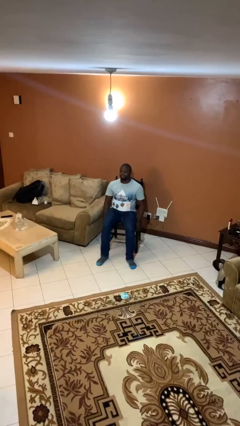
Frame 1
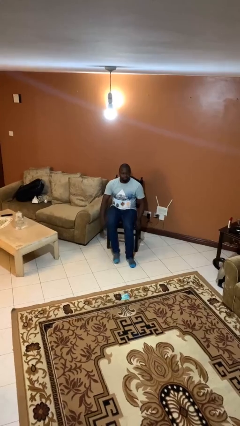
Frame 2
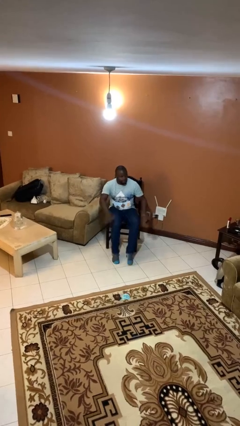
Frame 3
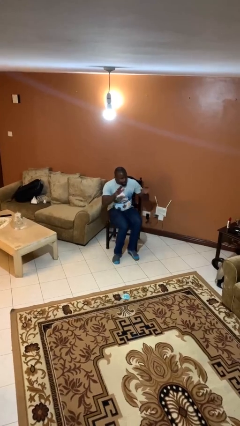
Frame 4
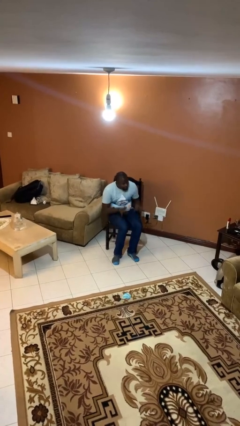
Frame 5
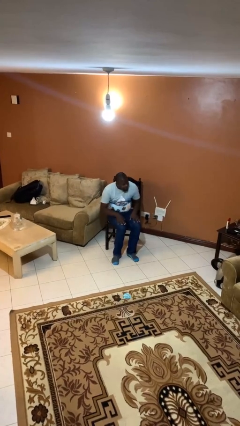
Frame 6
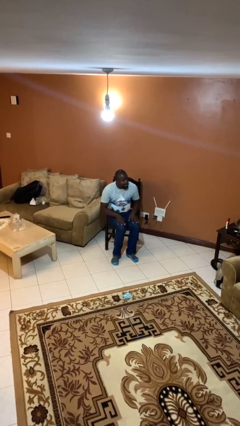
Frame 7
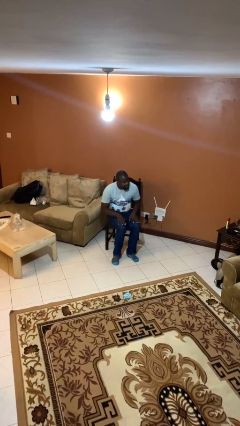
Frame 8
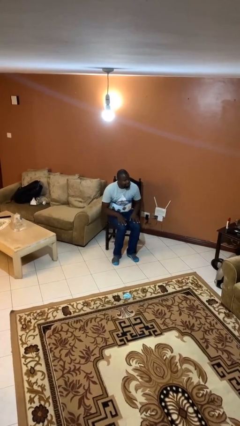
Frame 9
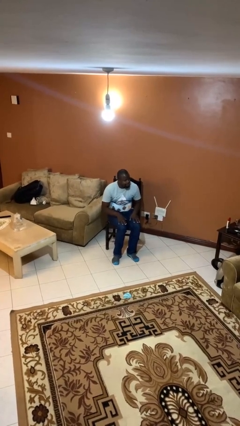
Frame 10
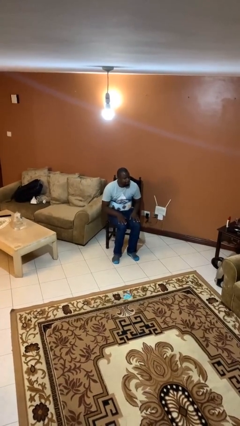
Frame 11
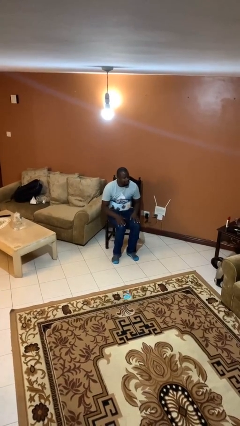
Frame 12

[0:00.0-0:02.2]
person slaps hands on thighs

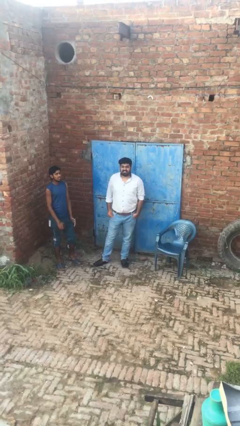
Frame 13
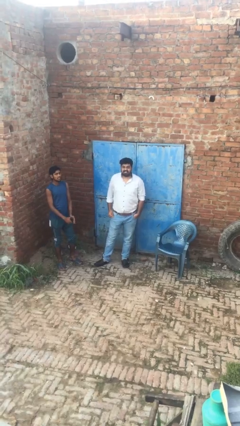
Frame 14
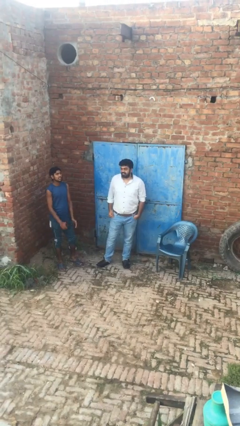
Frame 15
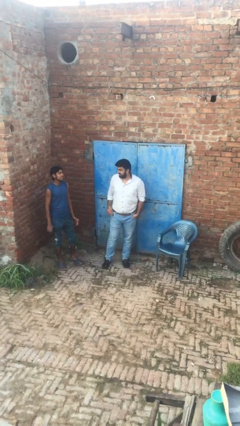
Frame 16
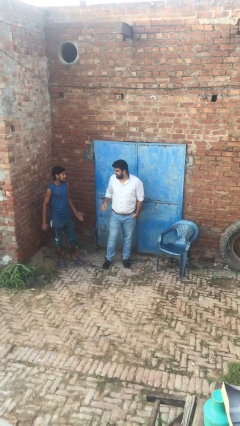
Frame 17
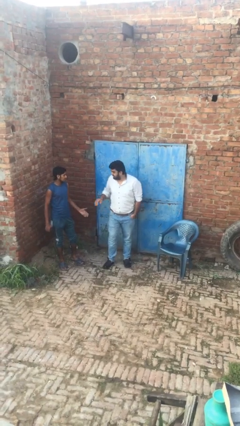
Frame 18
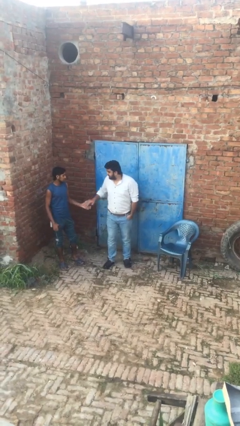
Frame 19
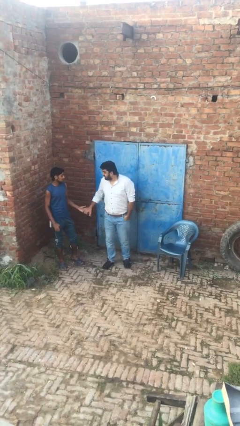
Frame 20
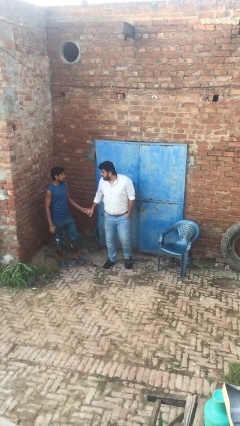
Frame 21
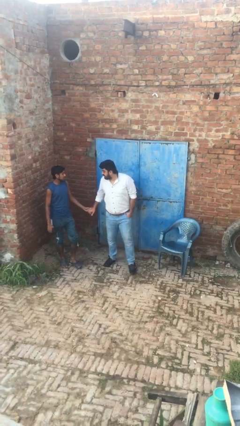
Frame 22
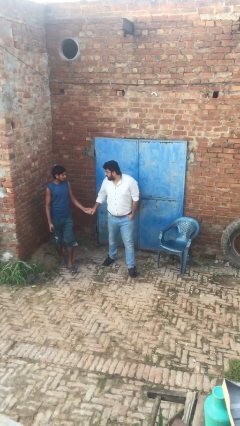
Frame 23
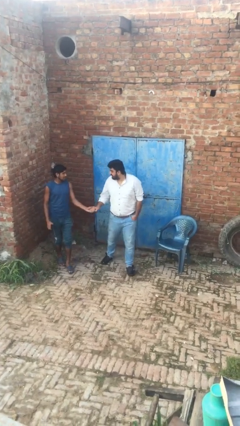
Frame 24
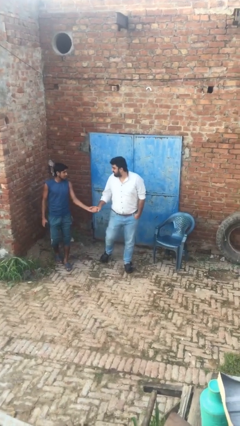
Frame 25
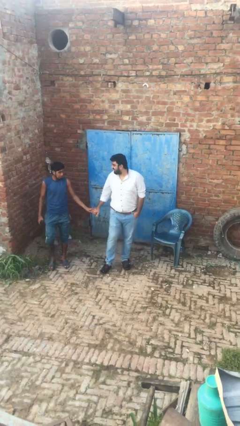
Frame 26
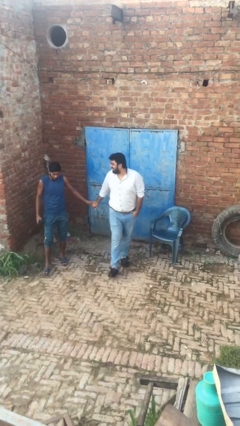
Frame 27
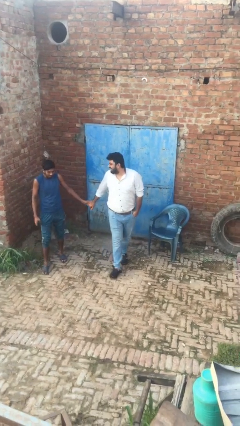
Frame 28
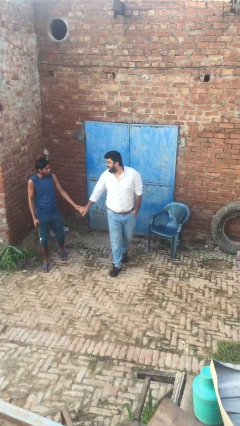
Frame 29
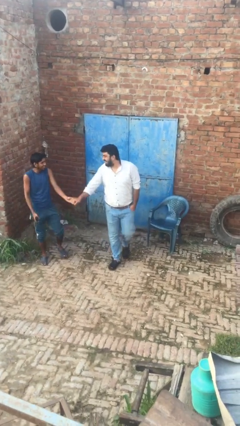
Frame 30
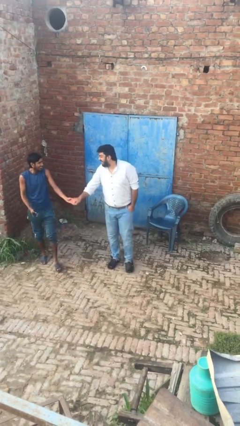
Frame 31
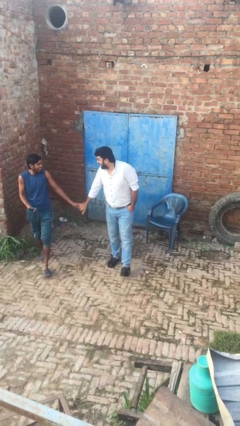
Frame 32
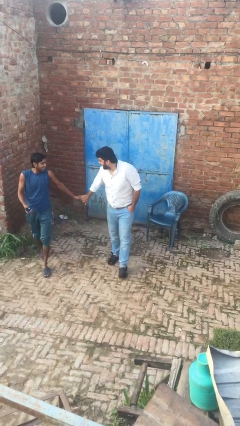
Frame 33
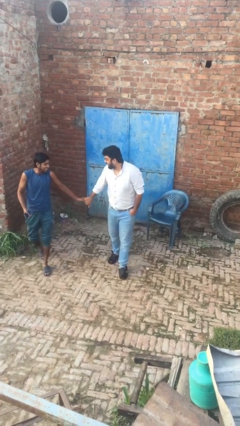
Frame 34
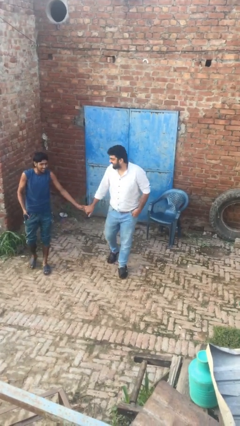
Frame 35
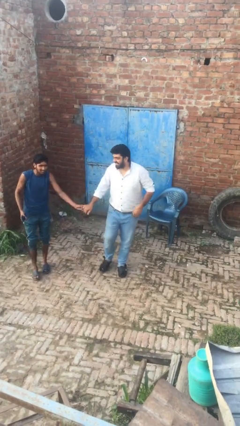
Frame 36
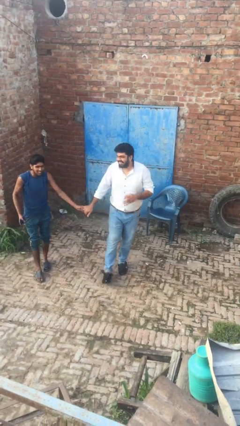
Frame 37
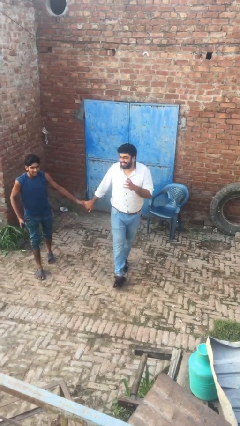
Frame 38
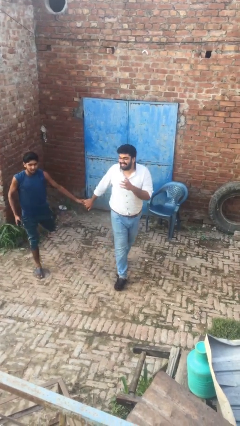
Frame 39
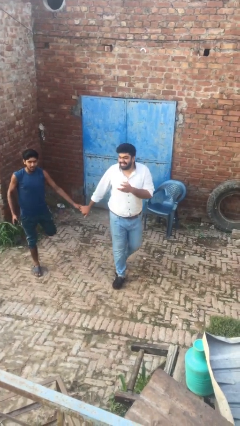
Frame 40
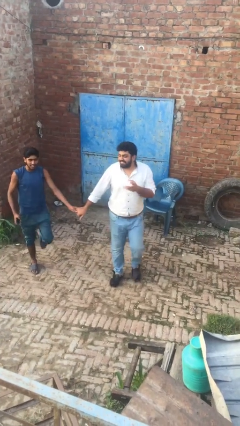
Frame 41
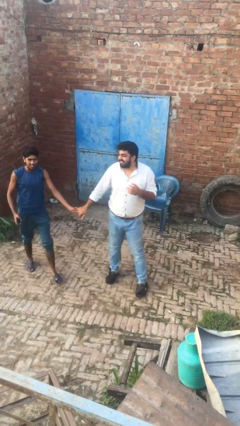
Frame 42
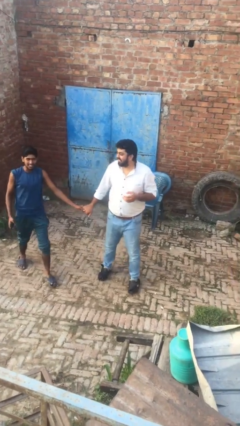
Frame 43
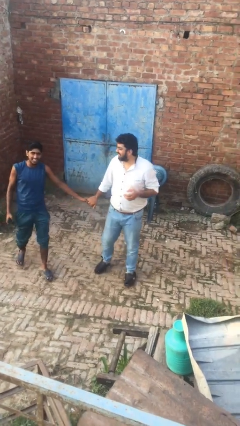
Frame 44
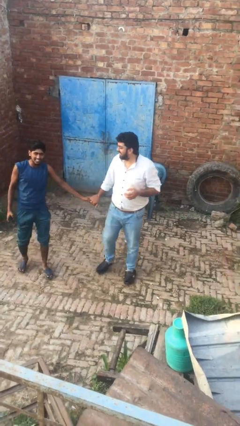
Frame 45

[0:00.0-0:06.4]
person holds hand

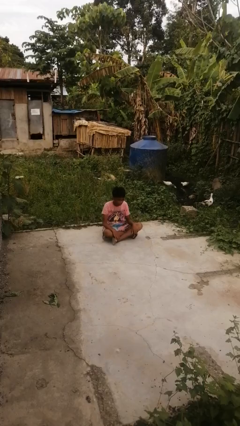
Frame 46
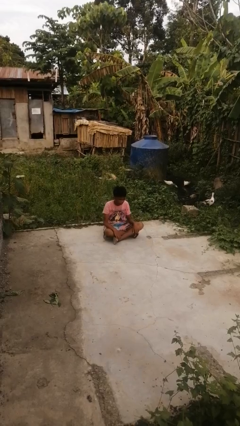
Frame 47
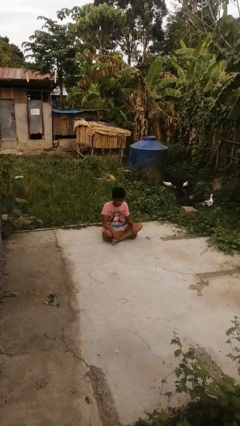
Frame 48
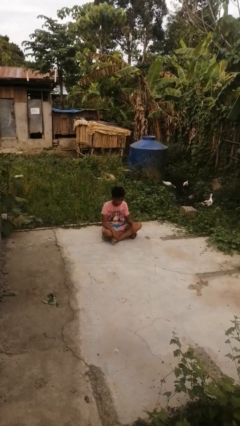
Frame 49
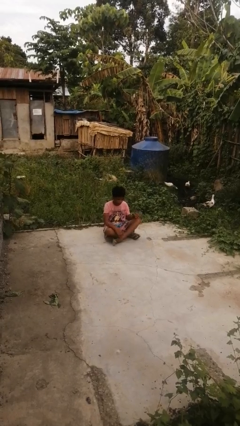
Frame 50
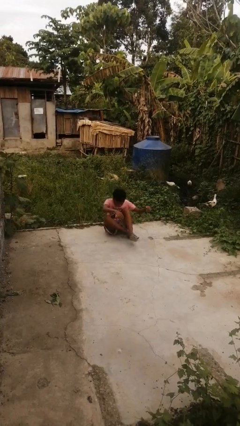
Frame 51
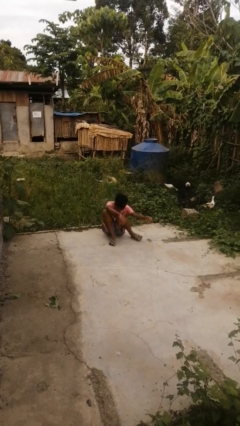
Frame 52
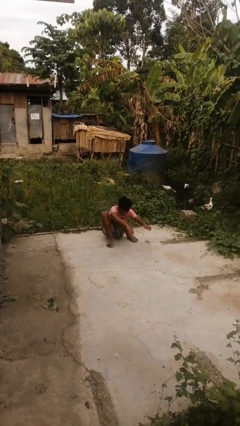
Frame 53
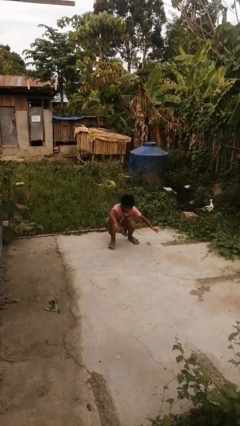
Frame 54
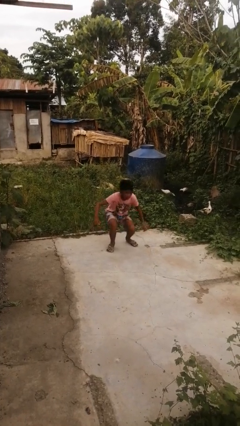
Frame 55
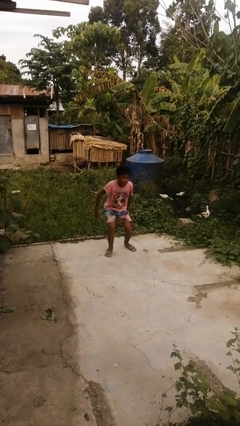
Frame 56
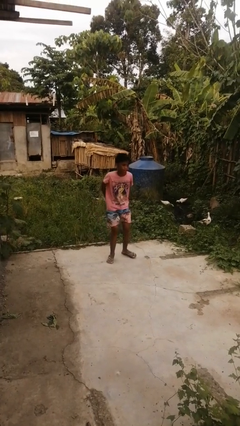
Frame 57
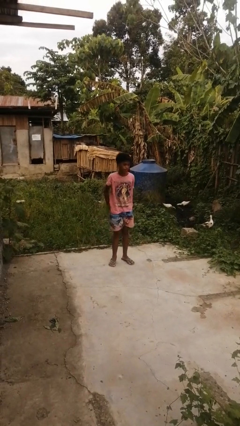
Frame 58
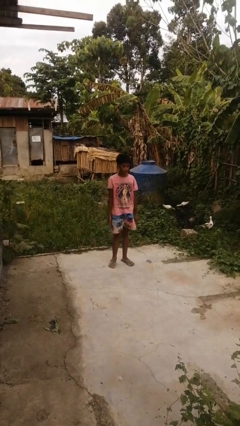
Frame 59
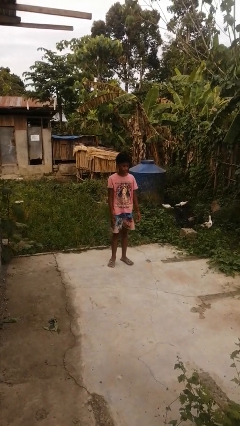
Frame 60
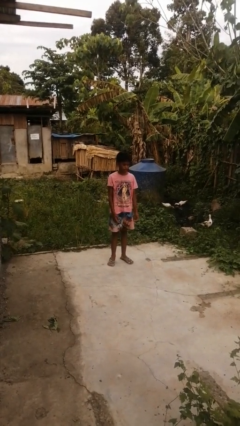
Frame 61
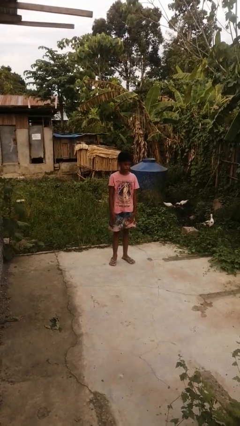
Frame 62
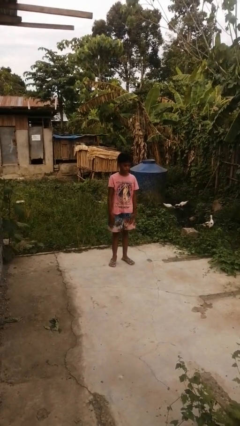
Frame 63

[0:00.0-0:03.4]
person stands up from floor

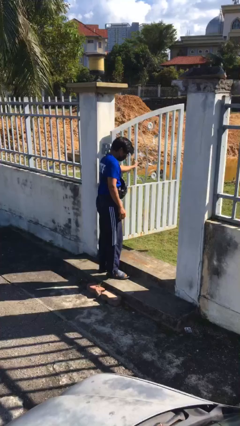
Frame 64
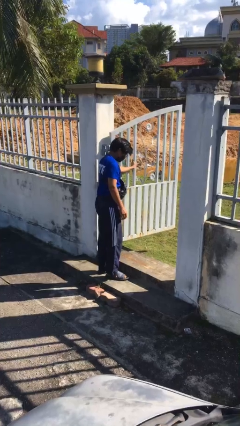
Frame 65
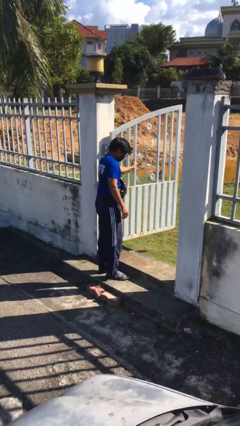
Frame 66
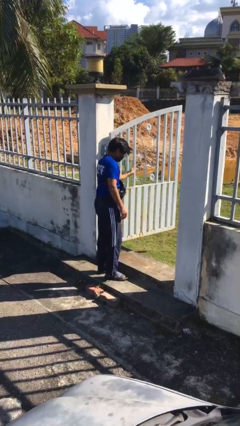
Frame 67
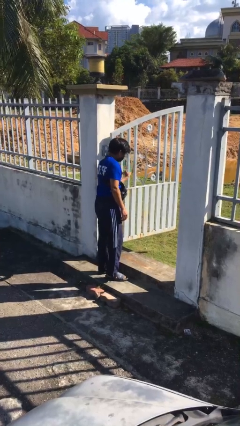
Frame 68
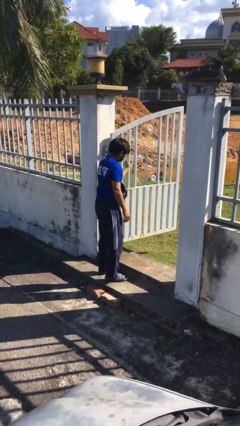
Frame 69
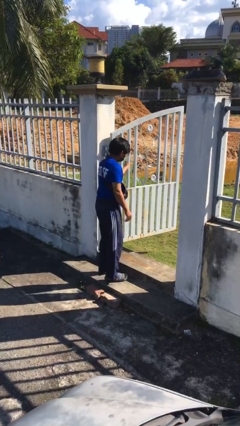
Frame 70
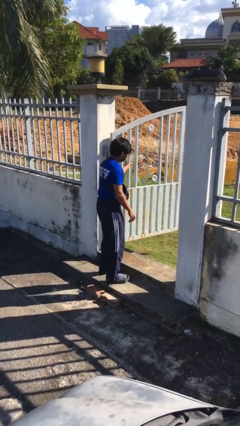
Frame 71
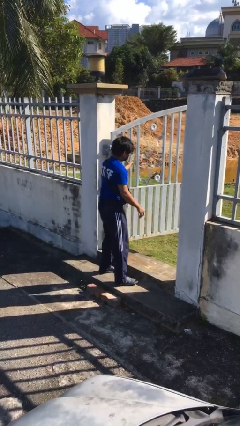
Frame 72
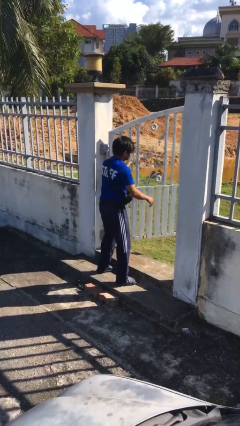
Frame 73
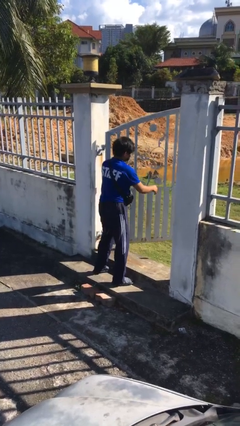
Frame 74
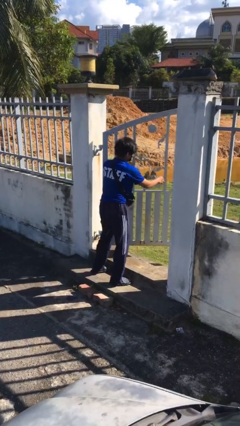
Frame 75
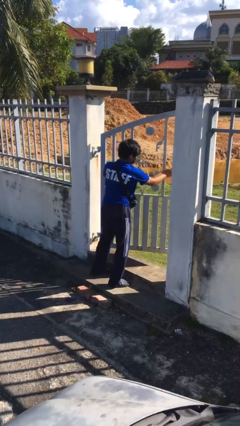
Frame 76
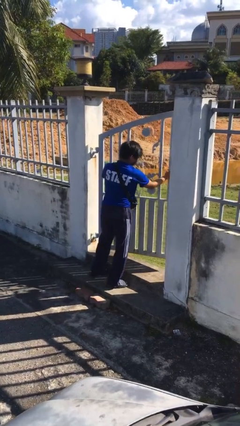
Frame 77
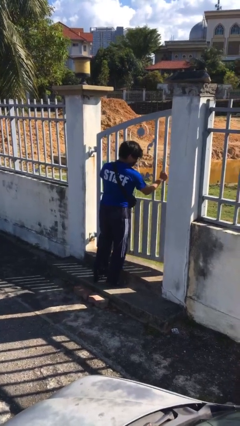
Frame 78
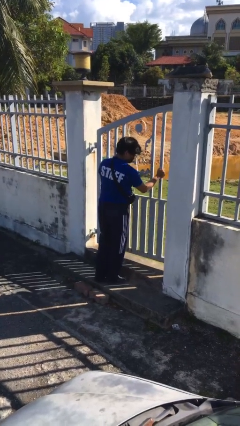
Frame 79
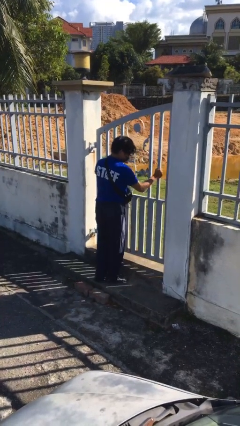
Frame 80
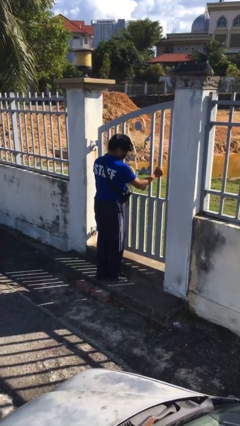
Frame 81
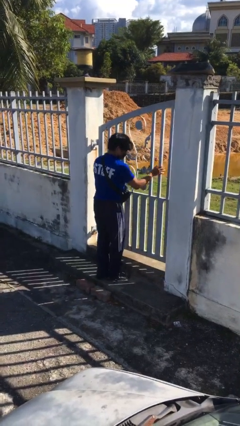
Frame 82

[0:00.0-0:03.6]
person closes facility door

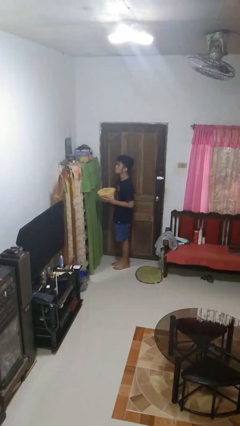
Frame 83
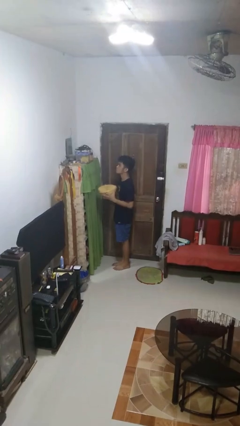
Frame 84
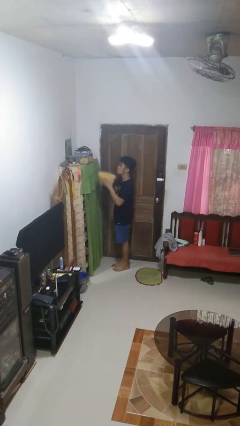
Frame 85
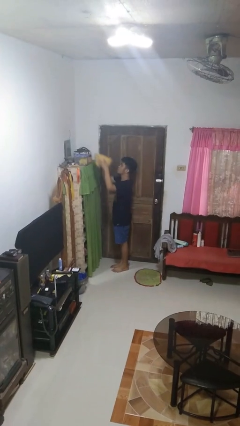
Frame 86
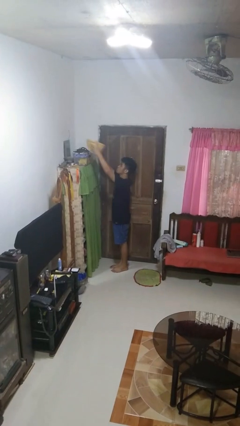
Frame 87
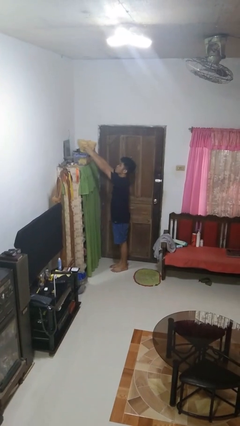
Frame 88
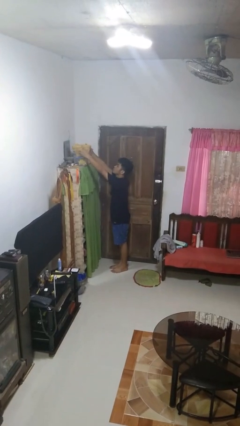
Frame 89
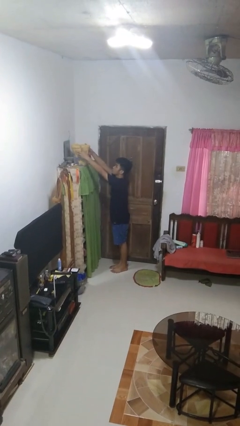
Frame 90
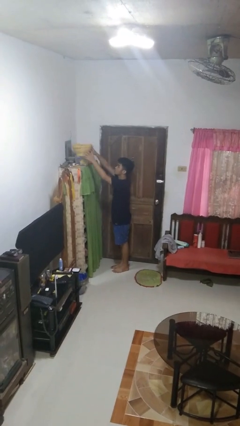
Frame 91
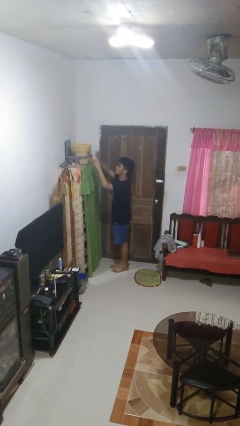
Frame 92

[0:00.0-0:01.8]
person puts down object on shelf
